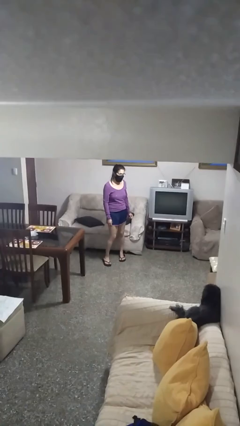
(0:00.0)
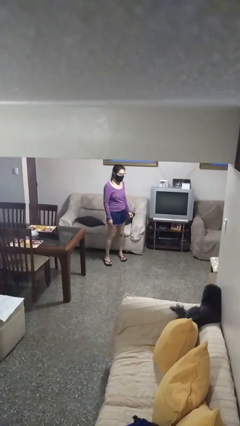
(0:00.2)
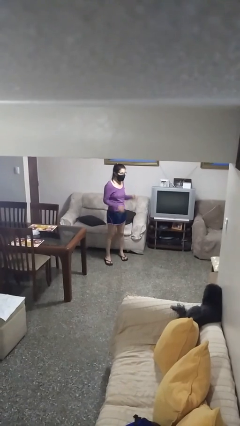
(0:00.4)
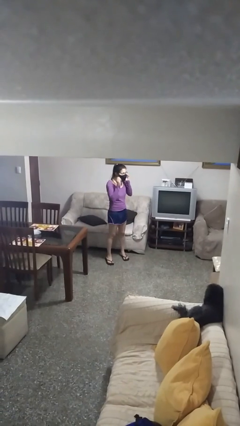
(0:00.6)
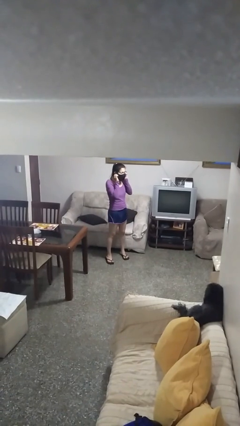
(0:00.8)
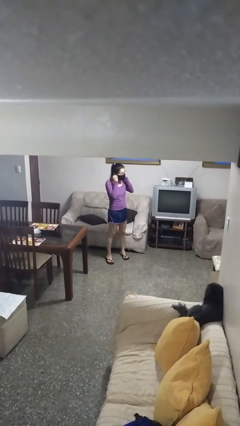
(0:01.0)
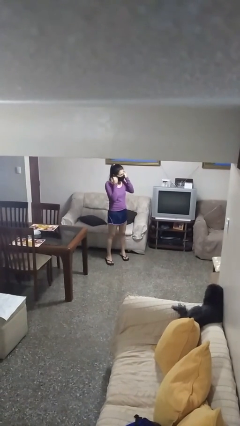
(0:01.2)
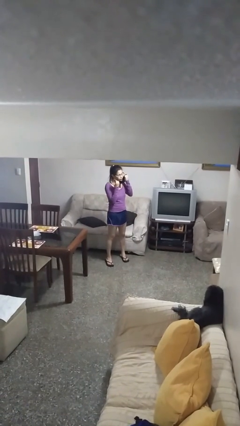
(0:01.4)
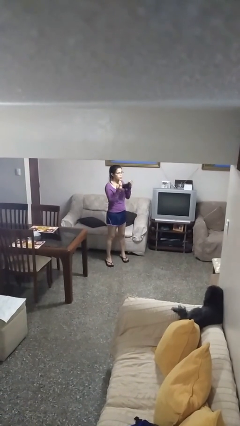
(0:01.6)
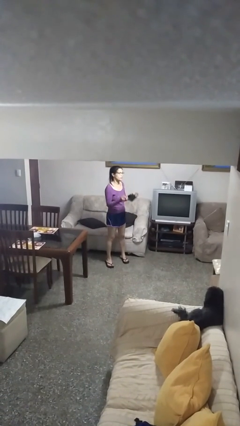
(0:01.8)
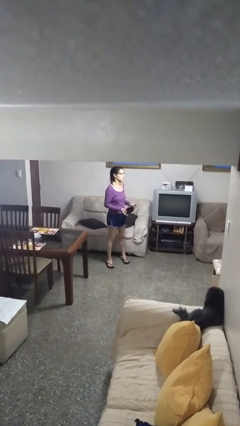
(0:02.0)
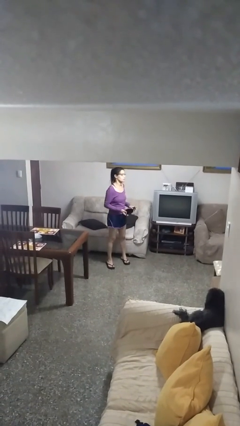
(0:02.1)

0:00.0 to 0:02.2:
person takes off facemask

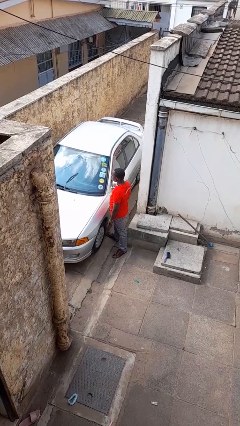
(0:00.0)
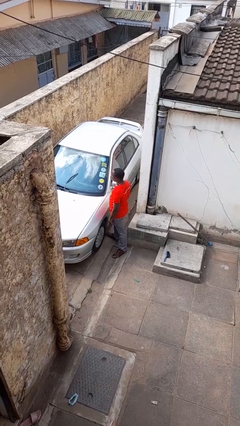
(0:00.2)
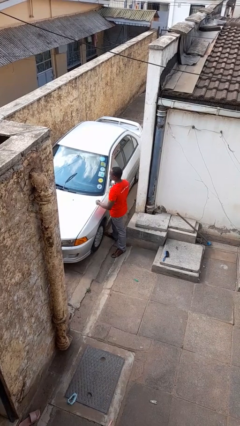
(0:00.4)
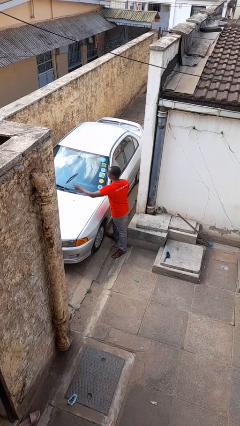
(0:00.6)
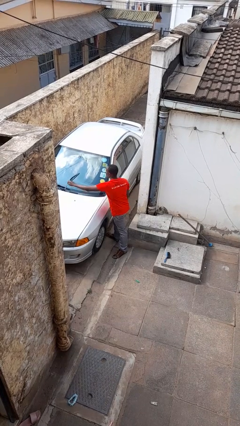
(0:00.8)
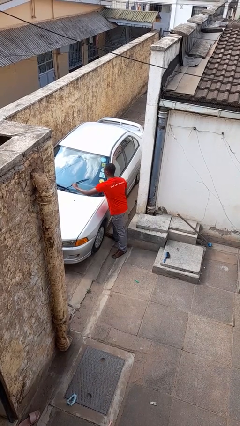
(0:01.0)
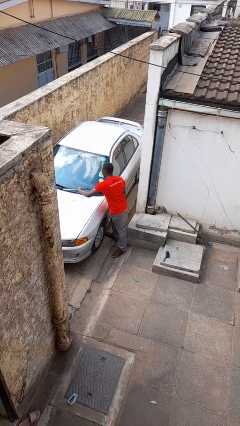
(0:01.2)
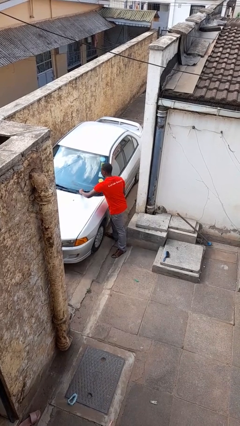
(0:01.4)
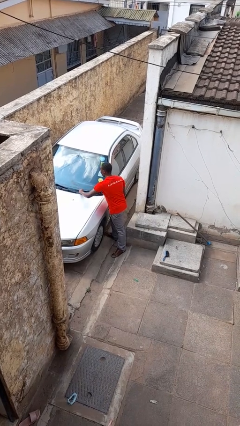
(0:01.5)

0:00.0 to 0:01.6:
person flips down car wipers

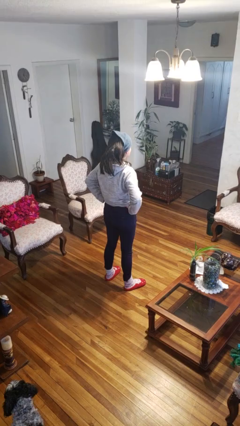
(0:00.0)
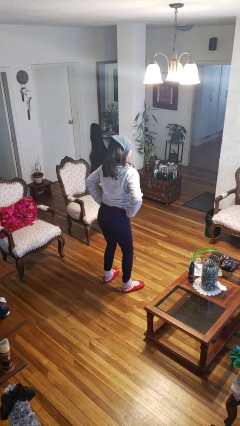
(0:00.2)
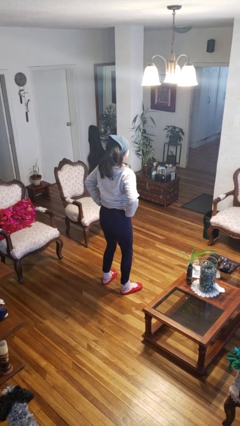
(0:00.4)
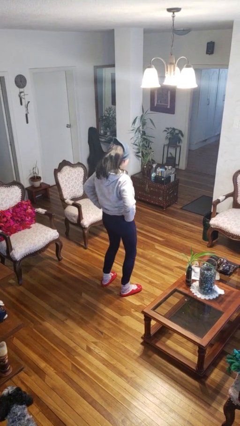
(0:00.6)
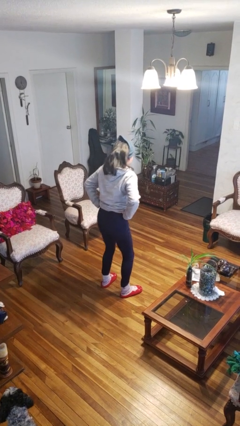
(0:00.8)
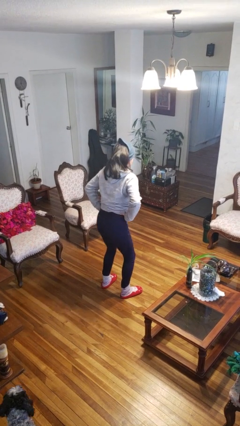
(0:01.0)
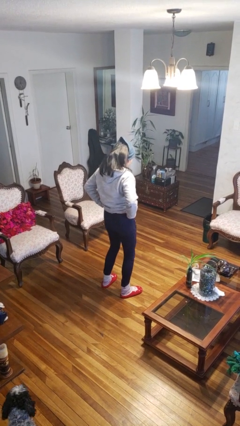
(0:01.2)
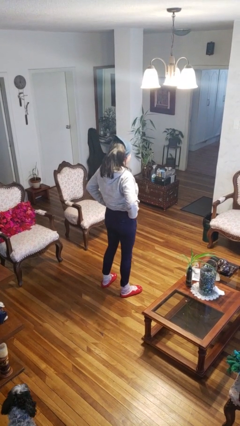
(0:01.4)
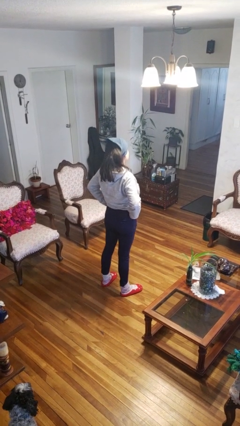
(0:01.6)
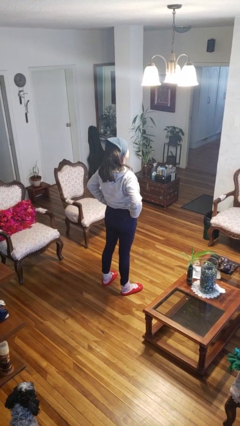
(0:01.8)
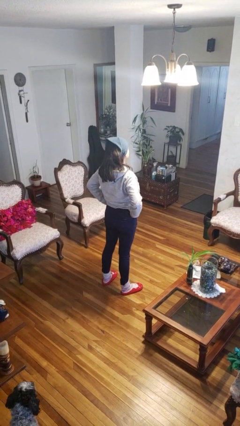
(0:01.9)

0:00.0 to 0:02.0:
person wiggles hips

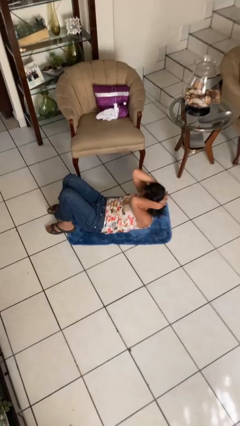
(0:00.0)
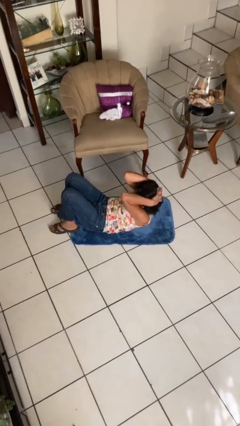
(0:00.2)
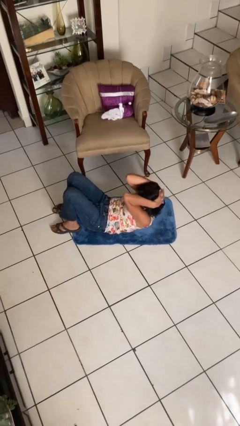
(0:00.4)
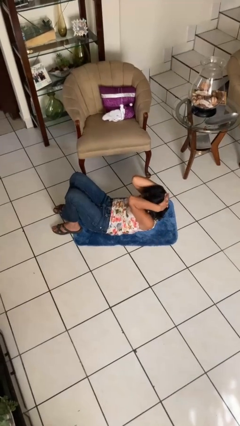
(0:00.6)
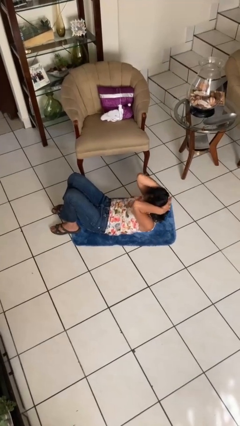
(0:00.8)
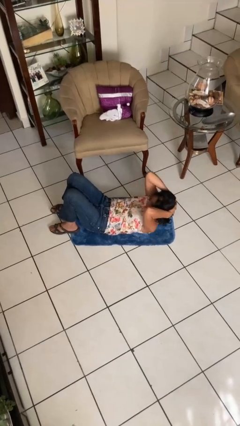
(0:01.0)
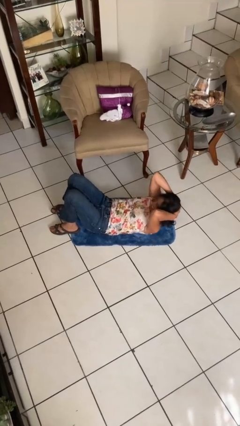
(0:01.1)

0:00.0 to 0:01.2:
person exercises with situp

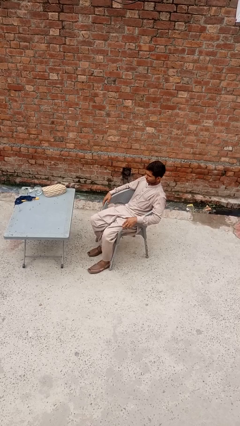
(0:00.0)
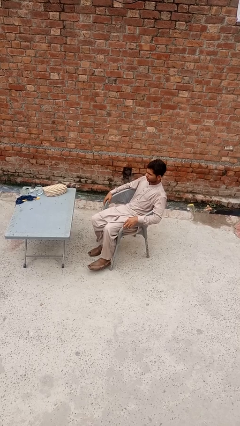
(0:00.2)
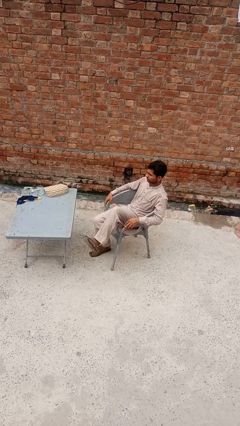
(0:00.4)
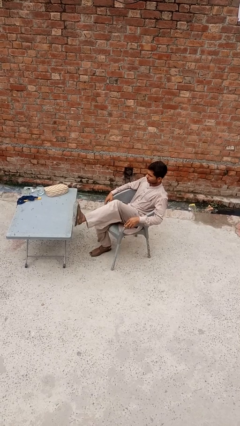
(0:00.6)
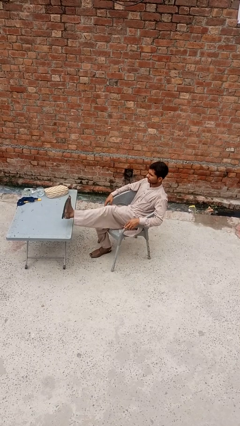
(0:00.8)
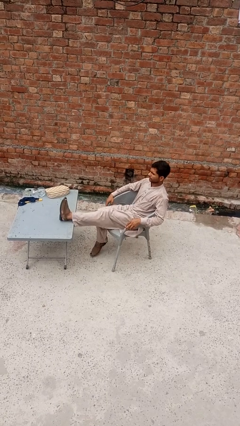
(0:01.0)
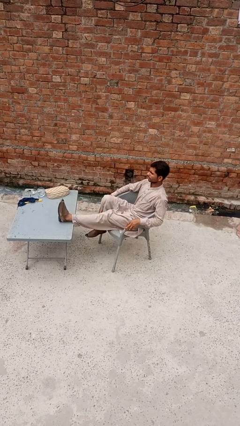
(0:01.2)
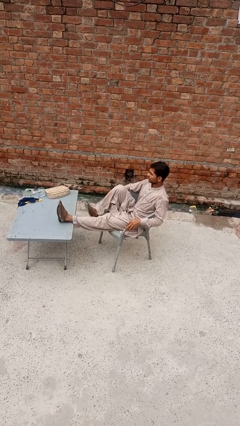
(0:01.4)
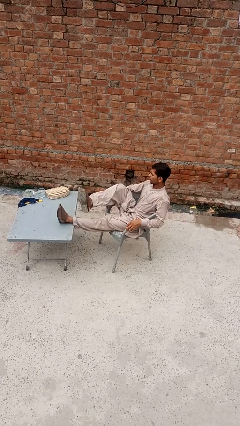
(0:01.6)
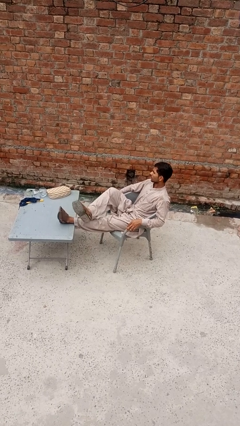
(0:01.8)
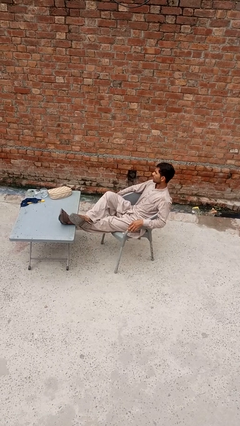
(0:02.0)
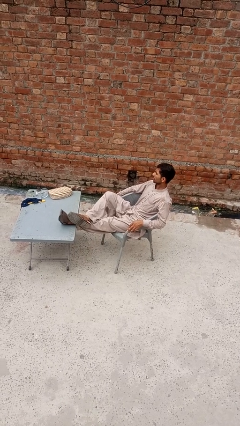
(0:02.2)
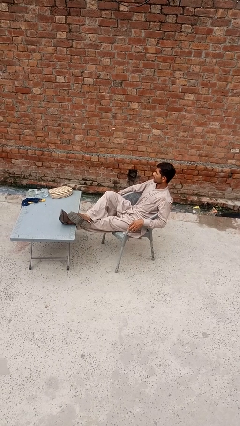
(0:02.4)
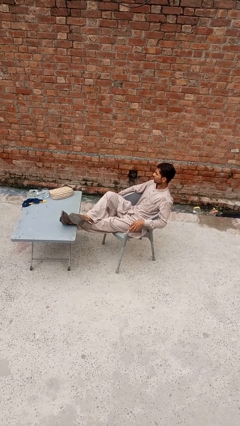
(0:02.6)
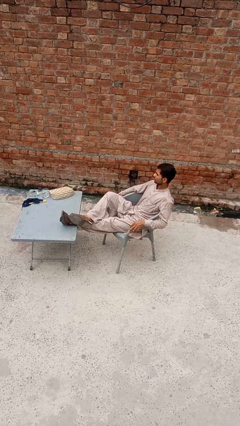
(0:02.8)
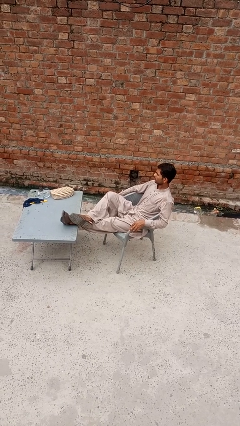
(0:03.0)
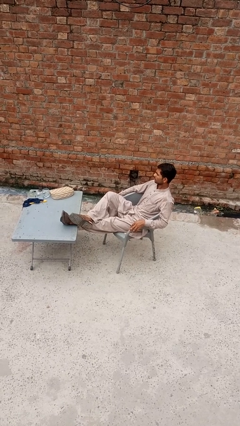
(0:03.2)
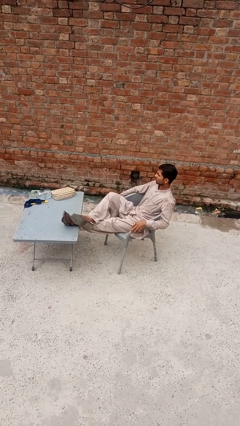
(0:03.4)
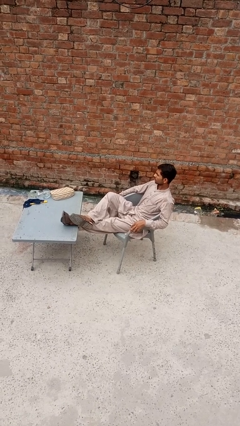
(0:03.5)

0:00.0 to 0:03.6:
person puts feet up

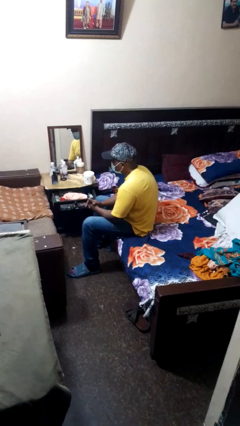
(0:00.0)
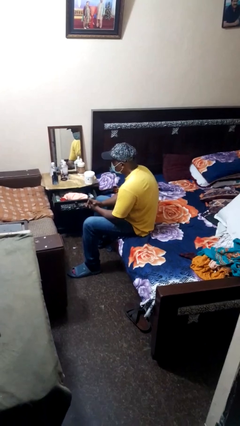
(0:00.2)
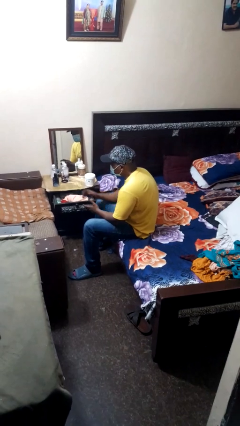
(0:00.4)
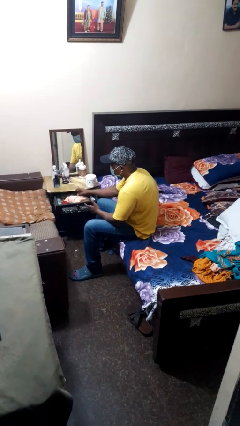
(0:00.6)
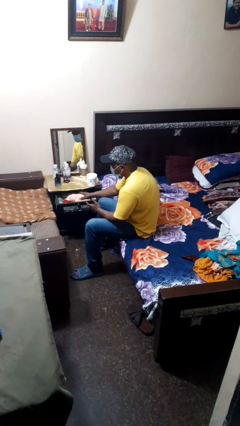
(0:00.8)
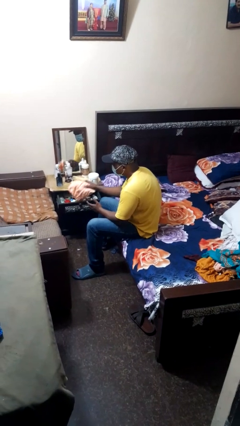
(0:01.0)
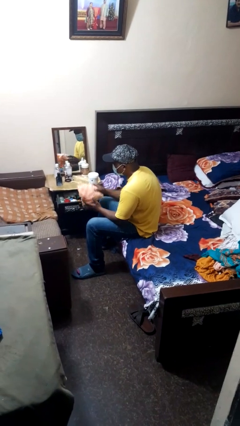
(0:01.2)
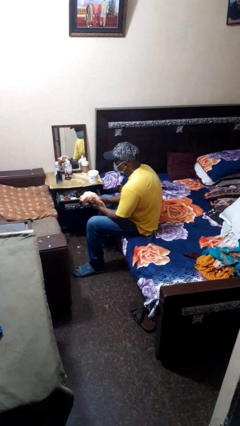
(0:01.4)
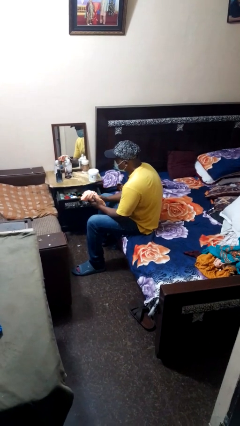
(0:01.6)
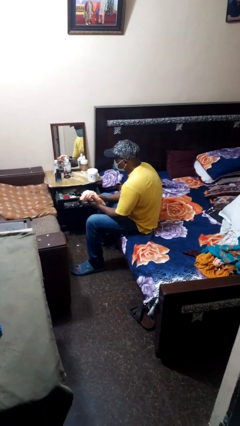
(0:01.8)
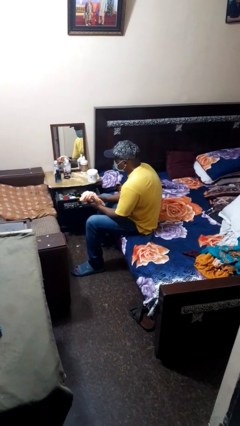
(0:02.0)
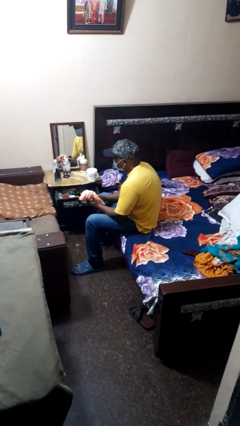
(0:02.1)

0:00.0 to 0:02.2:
person takes clothes from dresser

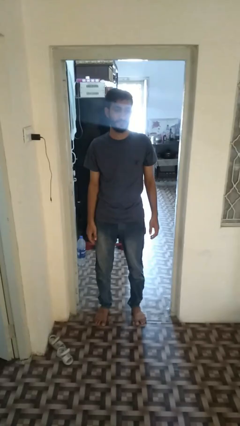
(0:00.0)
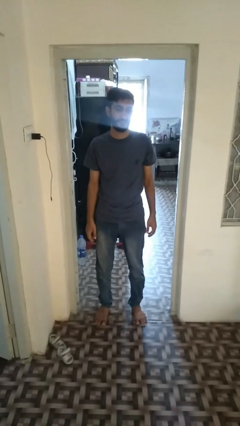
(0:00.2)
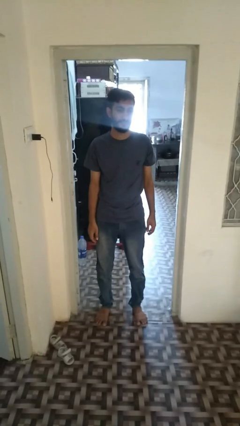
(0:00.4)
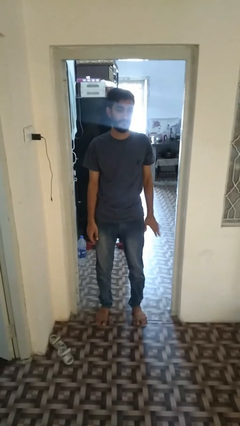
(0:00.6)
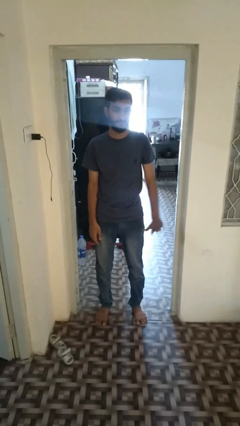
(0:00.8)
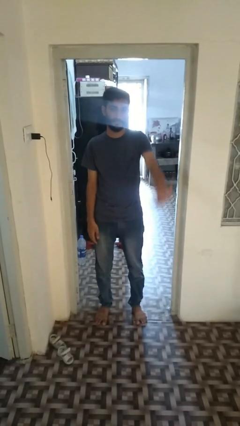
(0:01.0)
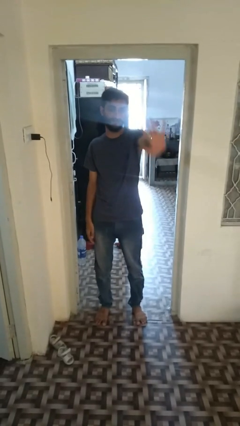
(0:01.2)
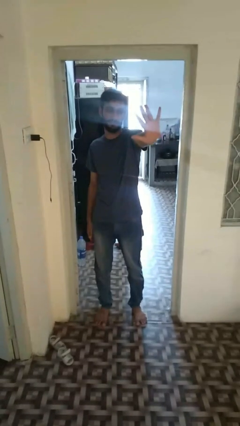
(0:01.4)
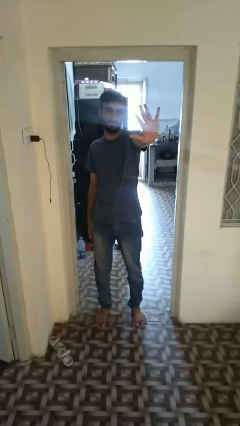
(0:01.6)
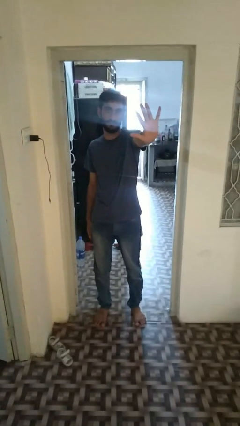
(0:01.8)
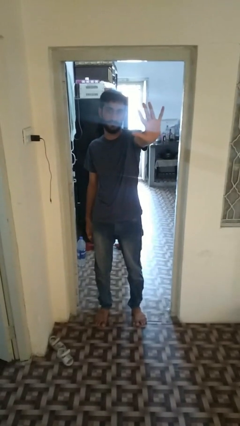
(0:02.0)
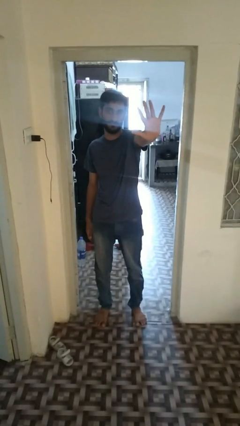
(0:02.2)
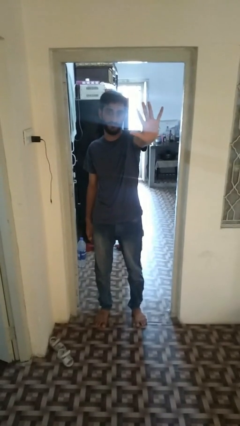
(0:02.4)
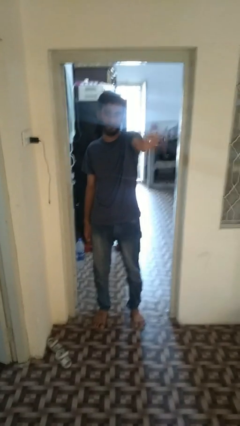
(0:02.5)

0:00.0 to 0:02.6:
person gestures number five

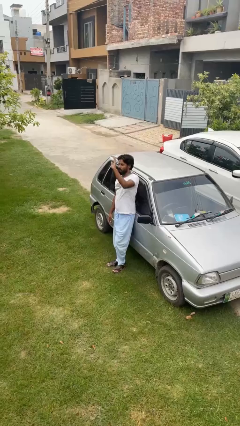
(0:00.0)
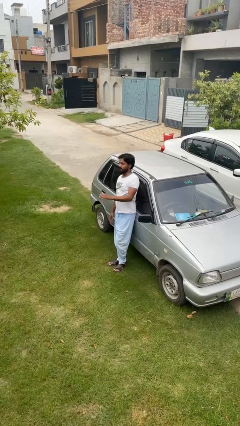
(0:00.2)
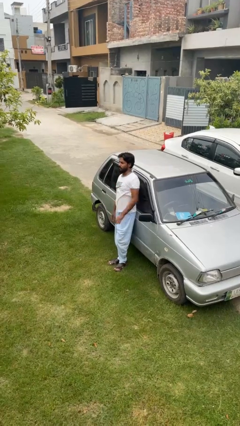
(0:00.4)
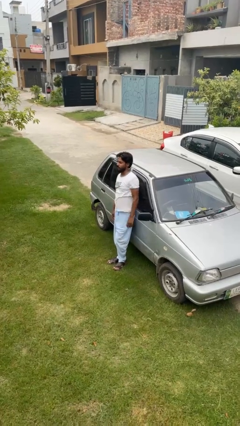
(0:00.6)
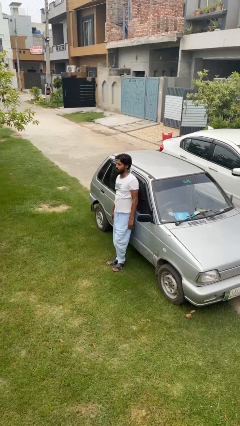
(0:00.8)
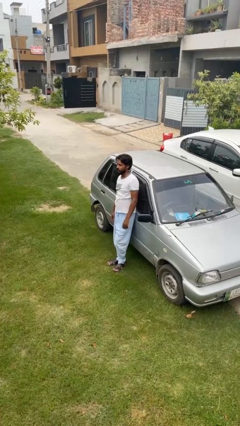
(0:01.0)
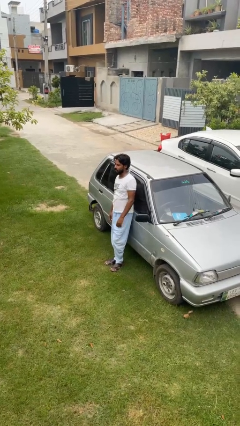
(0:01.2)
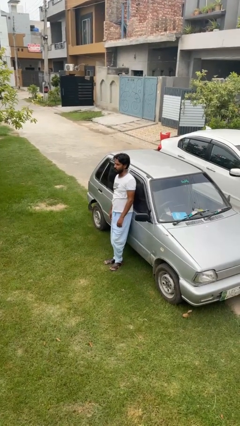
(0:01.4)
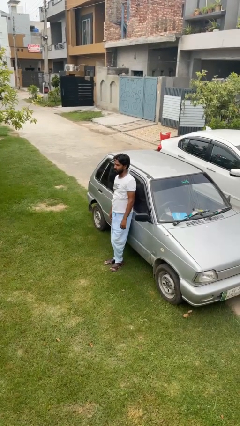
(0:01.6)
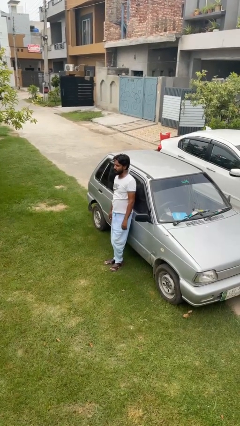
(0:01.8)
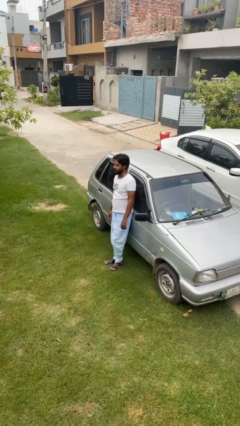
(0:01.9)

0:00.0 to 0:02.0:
person gestures lower hand
